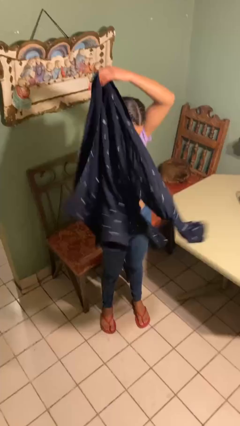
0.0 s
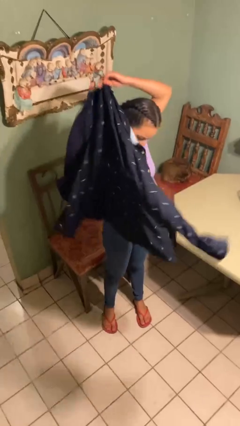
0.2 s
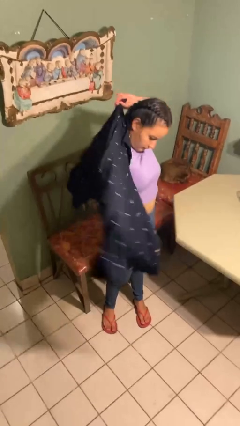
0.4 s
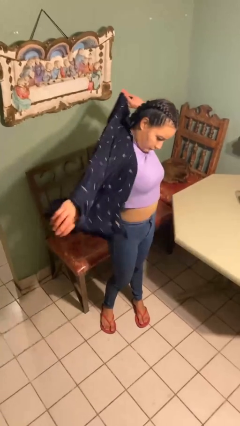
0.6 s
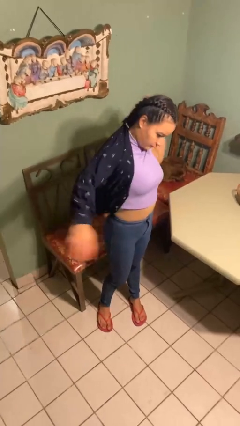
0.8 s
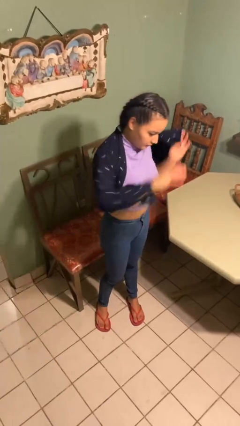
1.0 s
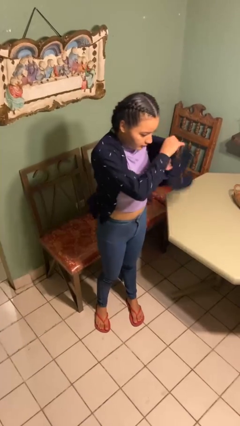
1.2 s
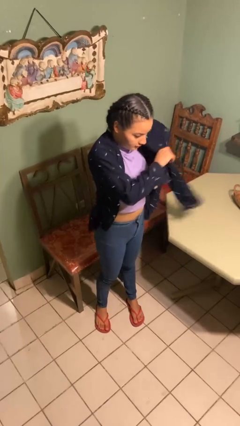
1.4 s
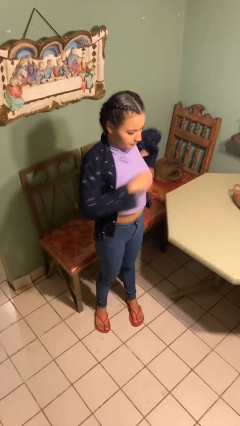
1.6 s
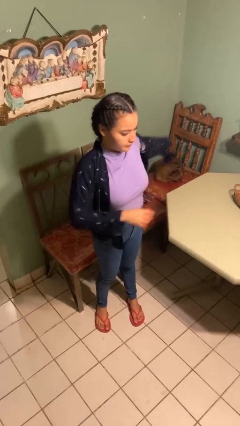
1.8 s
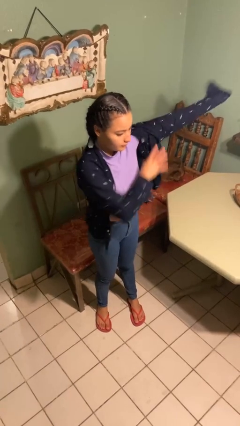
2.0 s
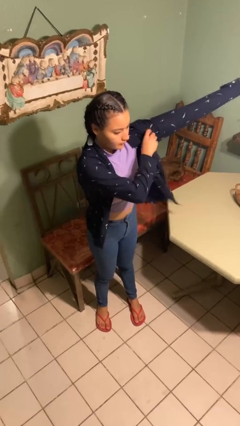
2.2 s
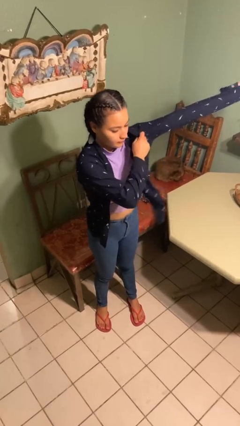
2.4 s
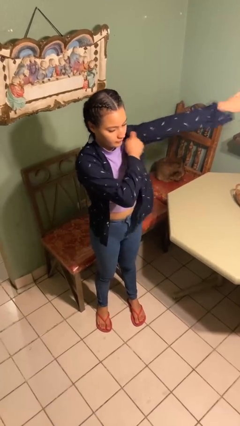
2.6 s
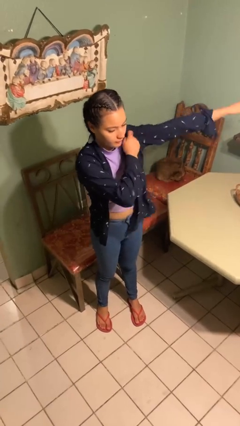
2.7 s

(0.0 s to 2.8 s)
person puts on shirt

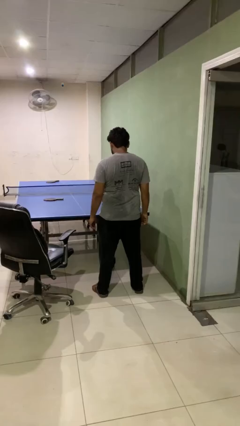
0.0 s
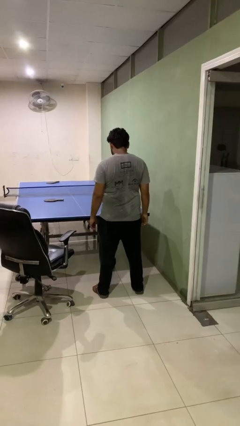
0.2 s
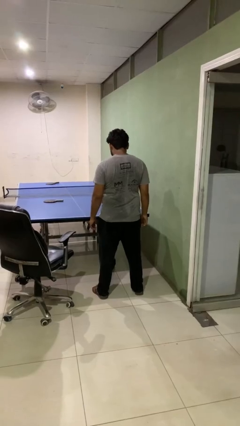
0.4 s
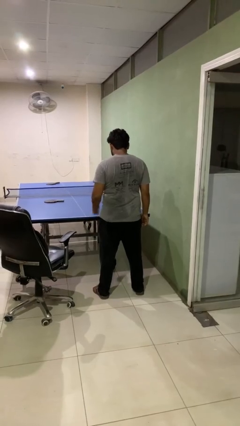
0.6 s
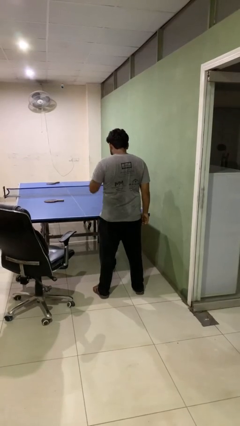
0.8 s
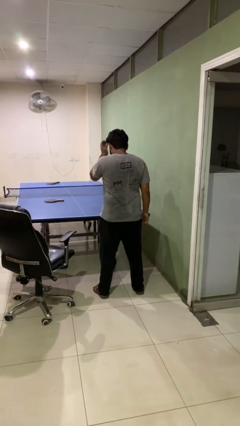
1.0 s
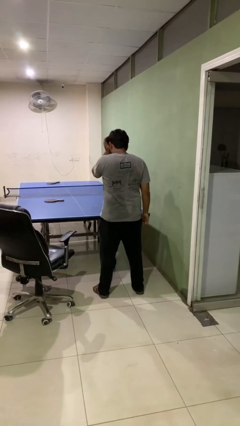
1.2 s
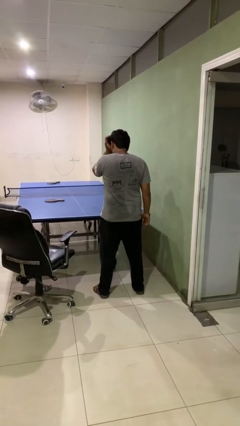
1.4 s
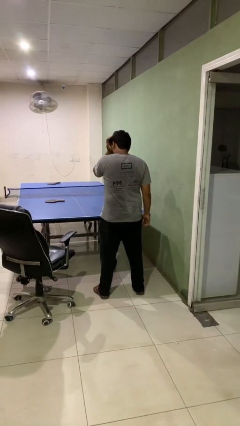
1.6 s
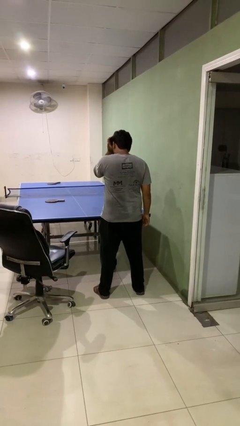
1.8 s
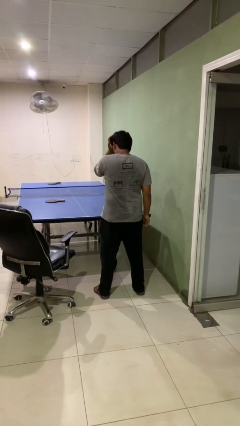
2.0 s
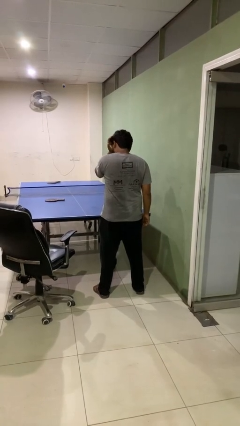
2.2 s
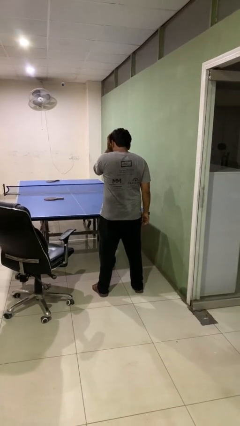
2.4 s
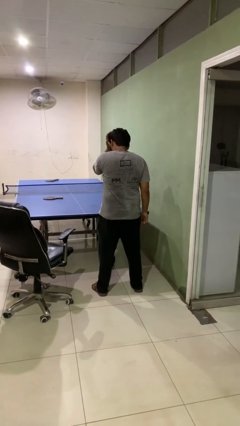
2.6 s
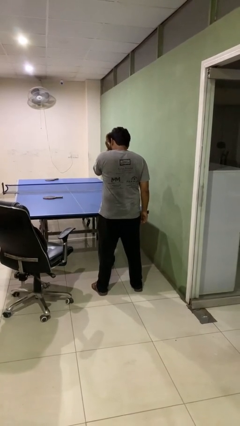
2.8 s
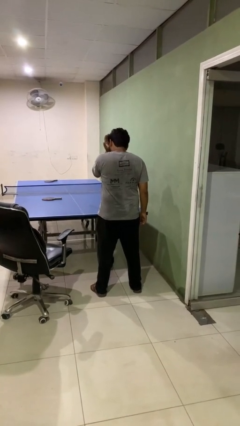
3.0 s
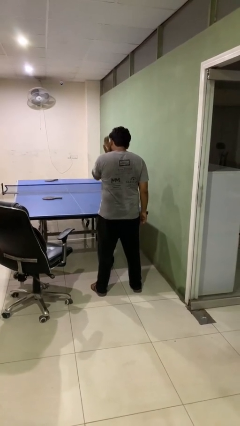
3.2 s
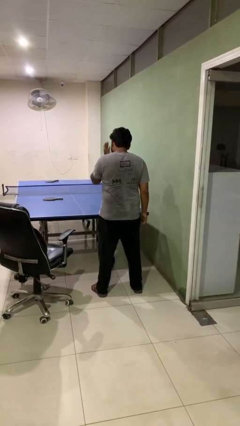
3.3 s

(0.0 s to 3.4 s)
person rubs eyes

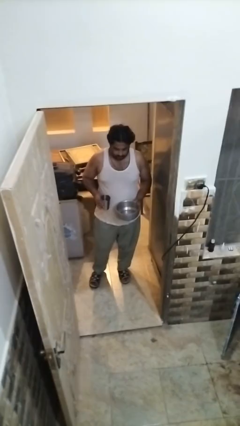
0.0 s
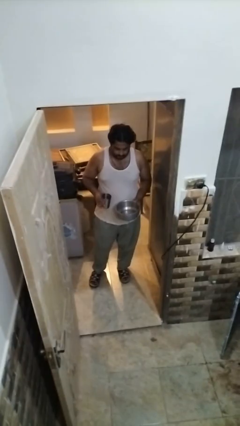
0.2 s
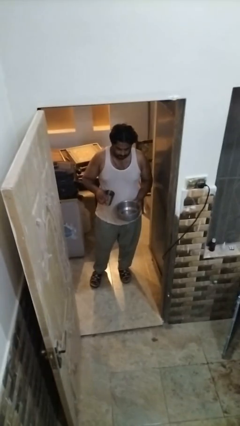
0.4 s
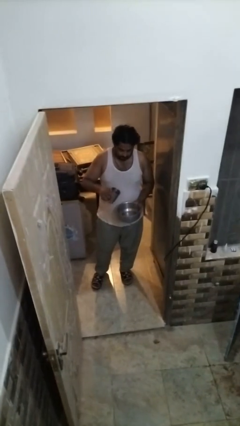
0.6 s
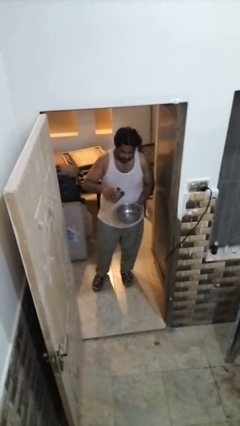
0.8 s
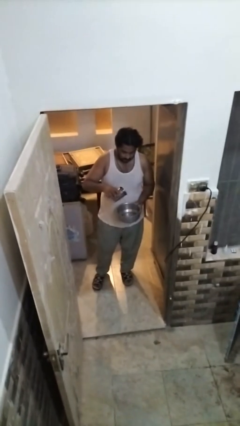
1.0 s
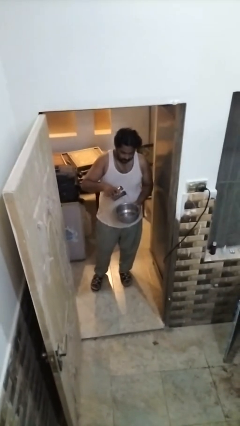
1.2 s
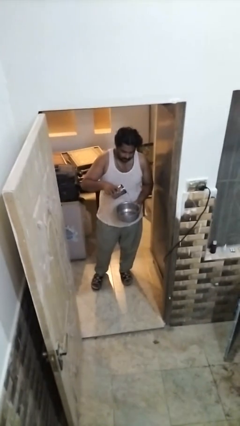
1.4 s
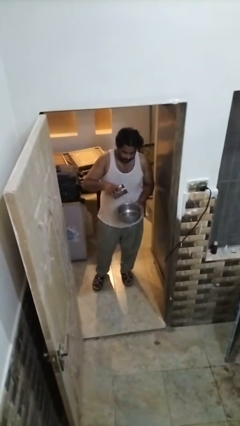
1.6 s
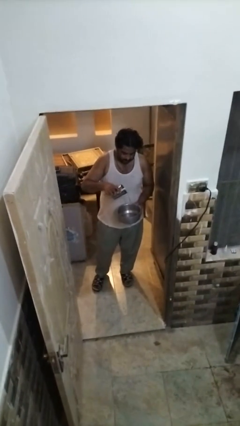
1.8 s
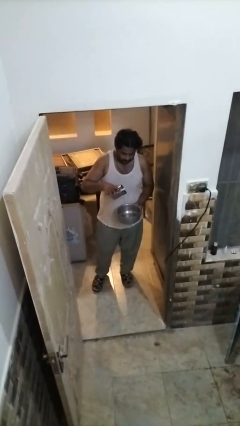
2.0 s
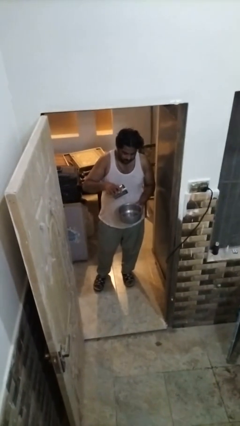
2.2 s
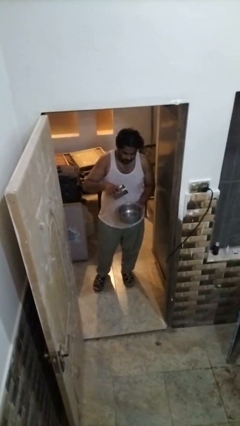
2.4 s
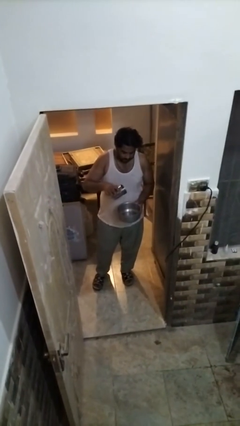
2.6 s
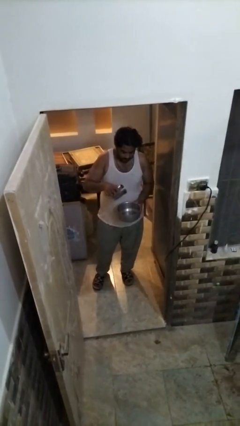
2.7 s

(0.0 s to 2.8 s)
person pours into bowl

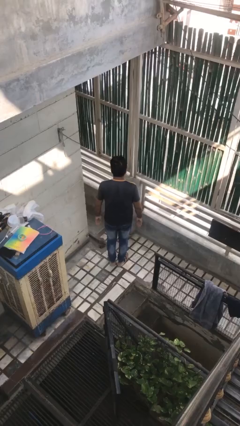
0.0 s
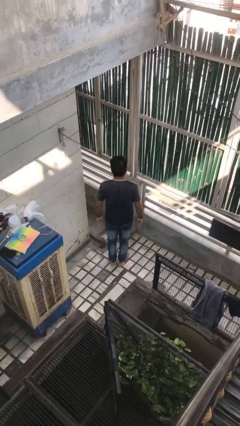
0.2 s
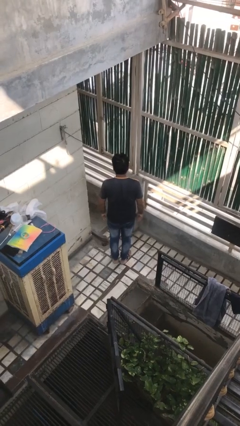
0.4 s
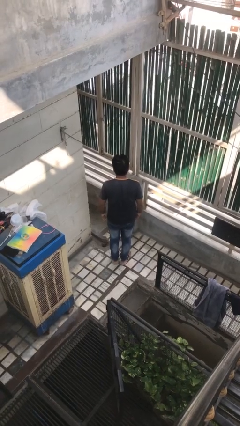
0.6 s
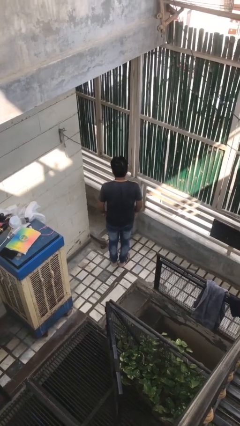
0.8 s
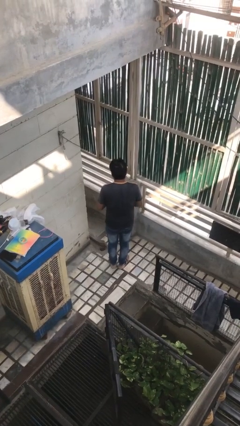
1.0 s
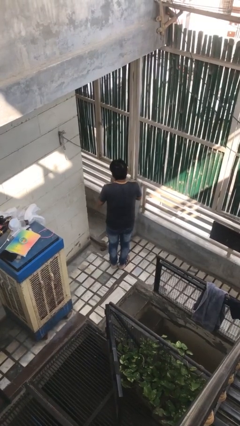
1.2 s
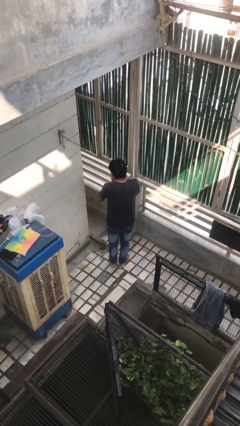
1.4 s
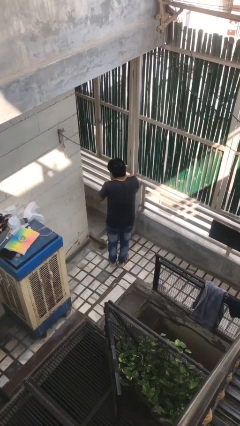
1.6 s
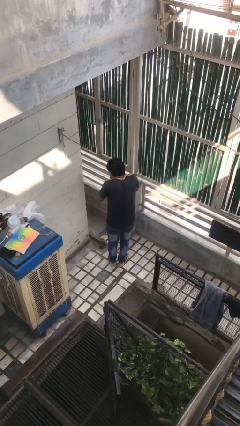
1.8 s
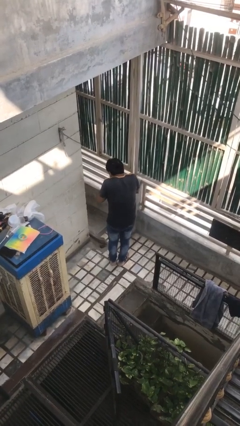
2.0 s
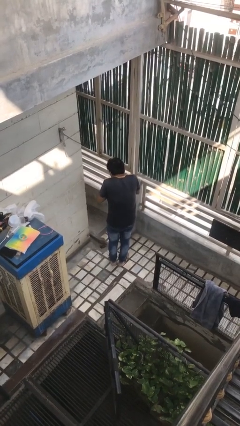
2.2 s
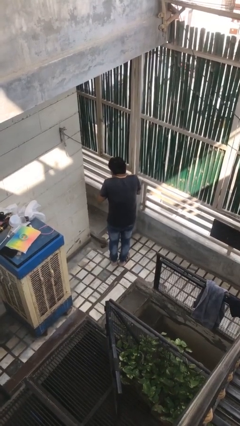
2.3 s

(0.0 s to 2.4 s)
person sneezes into hand

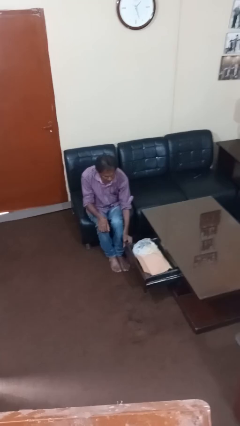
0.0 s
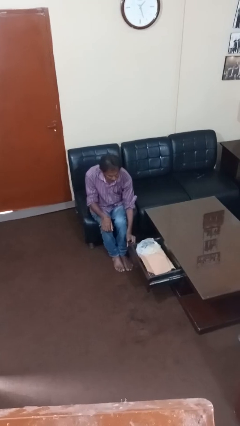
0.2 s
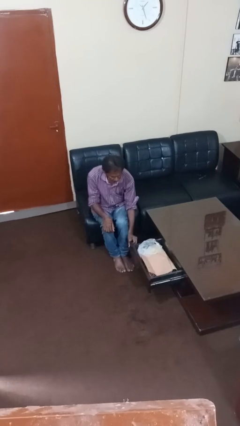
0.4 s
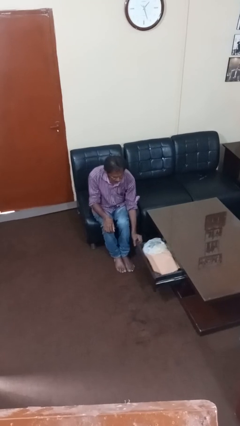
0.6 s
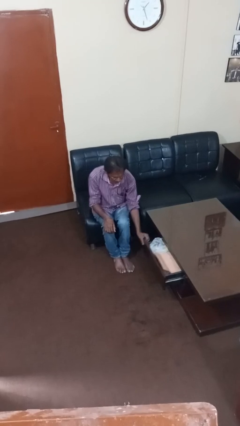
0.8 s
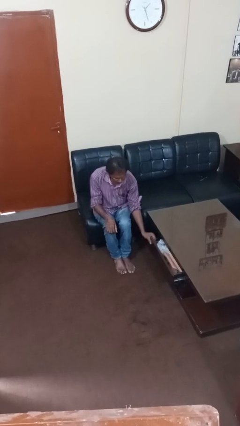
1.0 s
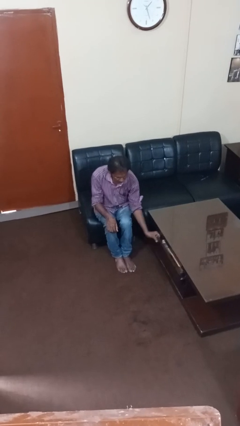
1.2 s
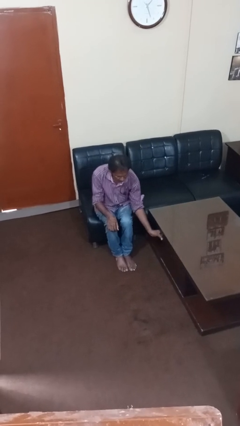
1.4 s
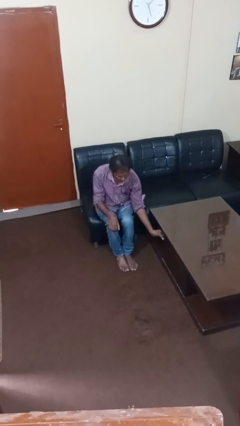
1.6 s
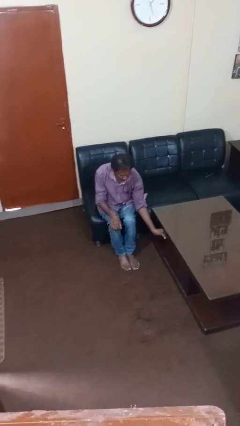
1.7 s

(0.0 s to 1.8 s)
person closes dresser drawer

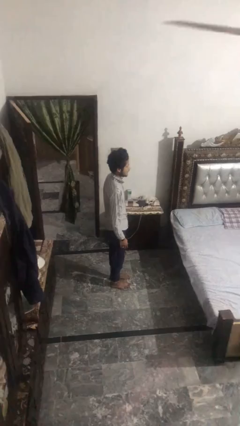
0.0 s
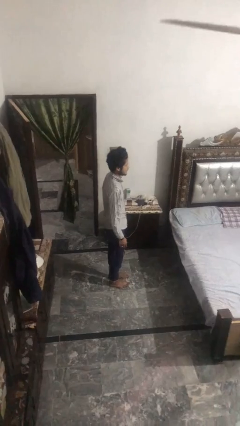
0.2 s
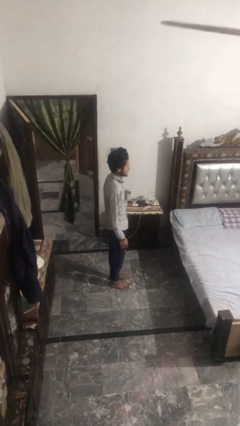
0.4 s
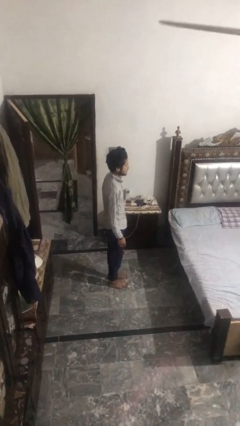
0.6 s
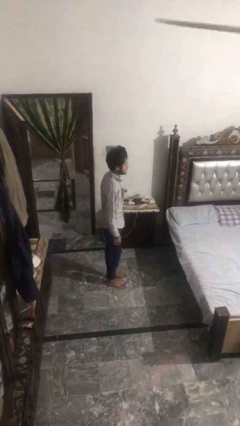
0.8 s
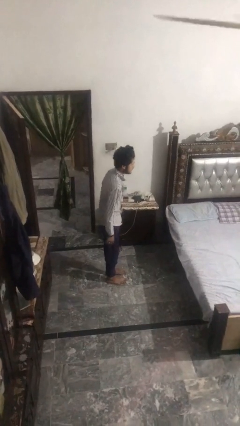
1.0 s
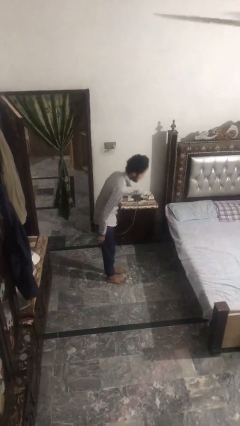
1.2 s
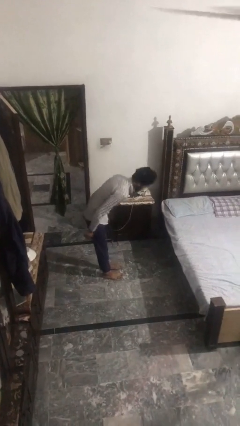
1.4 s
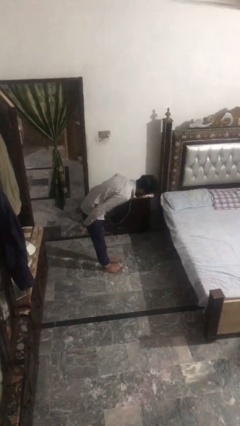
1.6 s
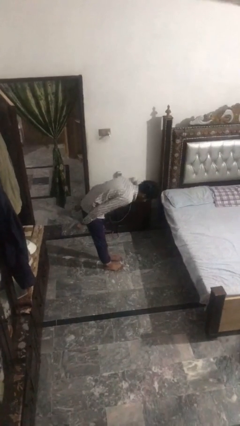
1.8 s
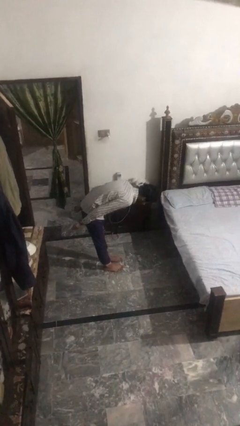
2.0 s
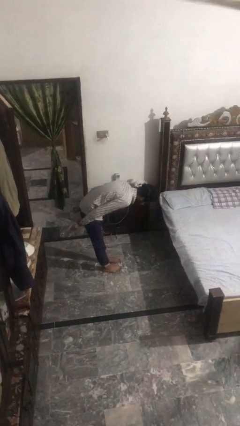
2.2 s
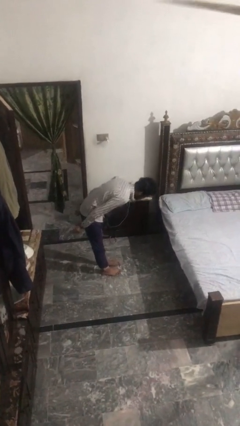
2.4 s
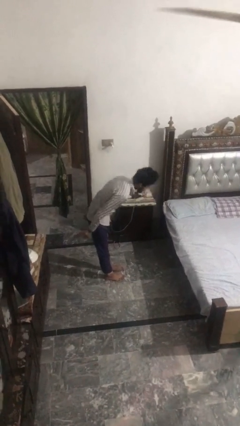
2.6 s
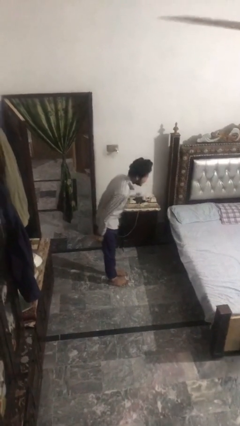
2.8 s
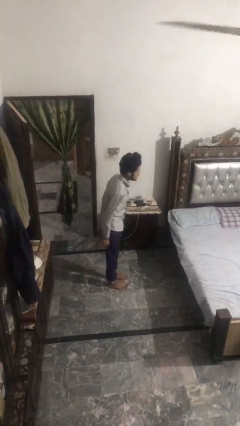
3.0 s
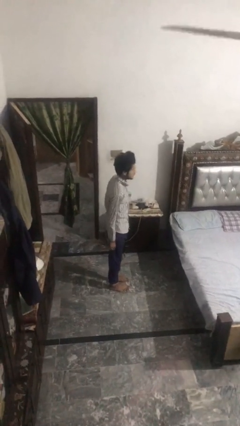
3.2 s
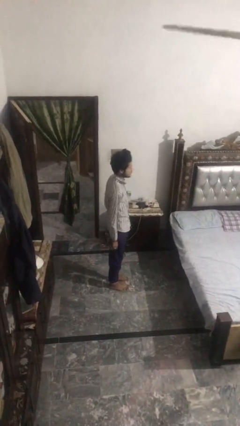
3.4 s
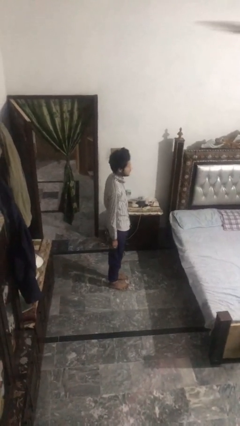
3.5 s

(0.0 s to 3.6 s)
person bows

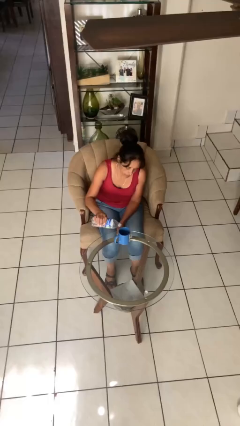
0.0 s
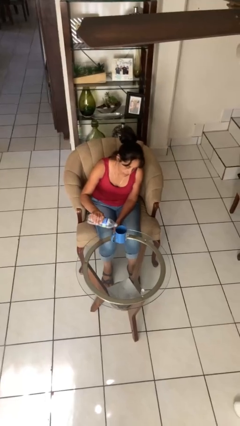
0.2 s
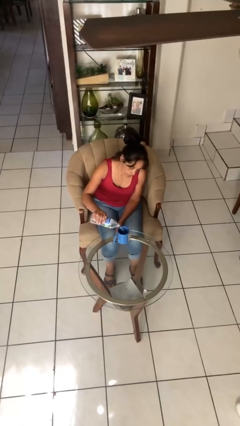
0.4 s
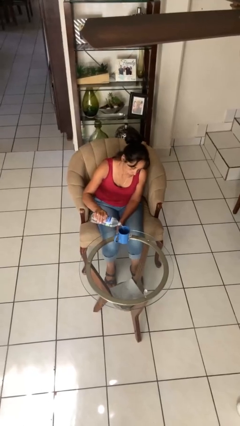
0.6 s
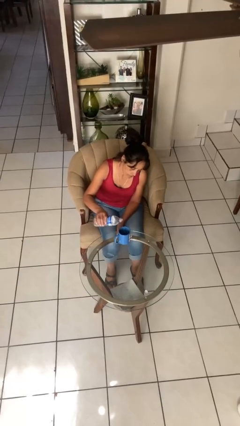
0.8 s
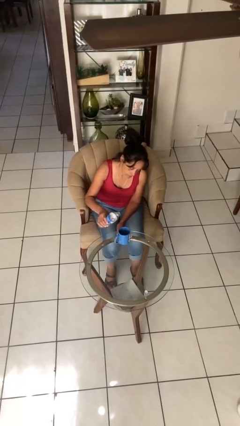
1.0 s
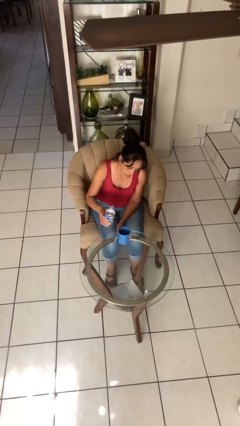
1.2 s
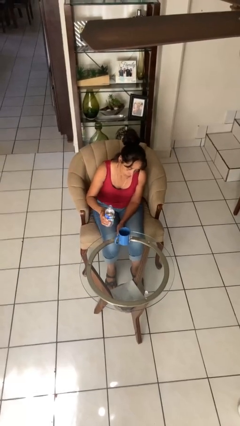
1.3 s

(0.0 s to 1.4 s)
person pours liquid into cup
